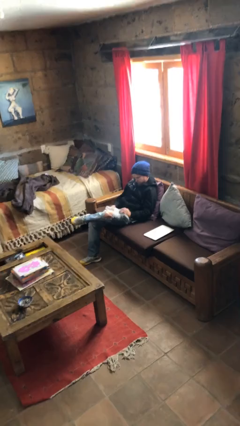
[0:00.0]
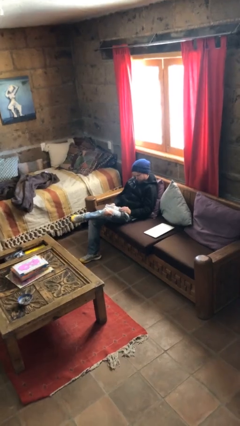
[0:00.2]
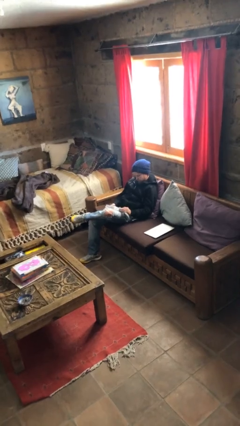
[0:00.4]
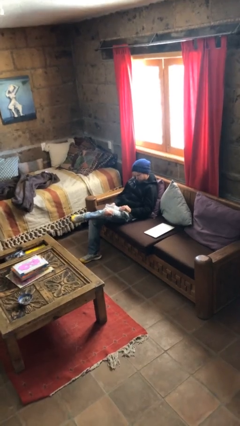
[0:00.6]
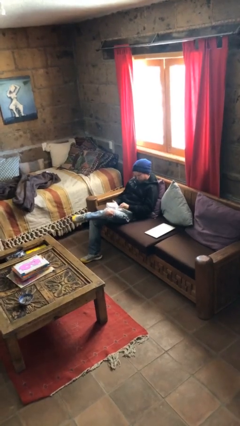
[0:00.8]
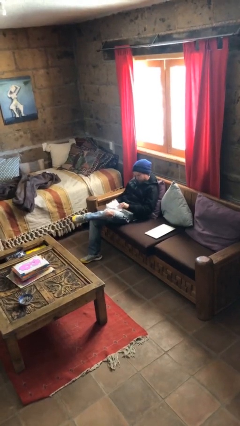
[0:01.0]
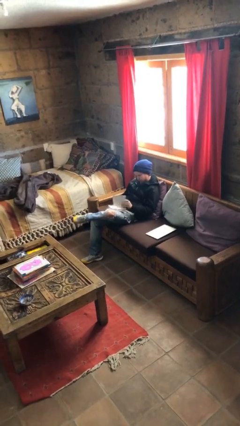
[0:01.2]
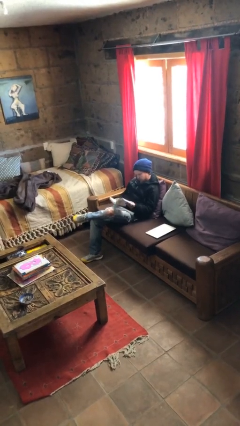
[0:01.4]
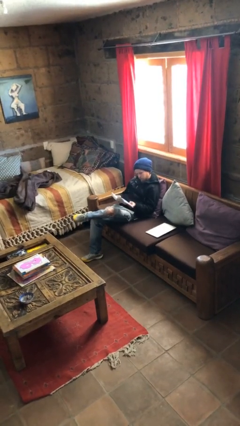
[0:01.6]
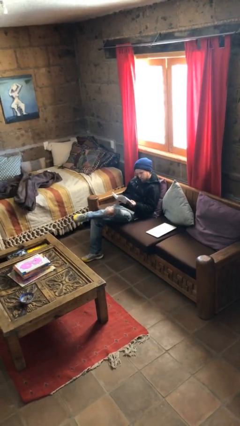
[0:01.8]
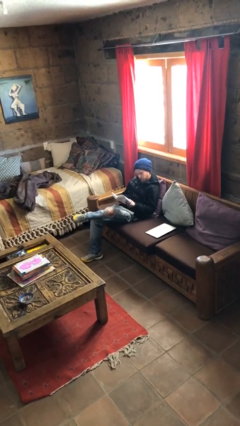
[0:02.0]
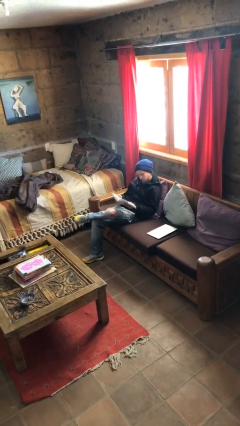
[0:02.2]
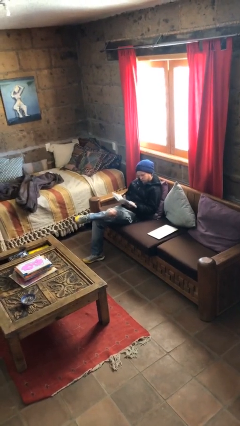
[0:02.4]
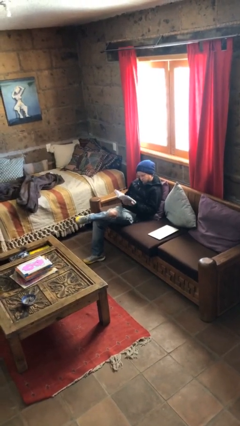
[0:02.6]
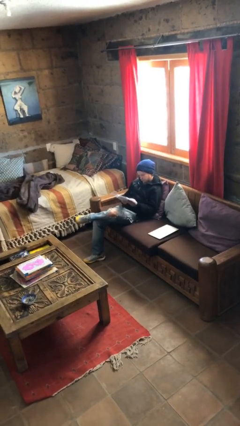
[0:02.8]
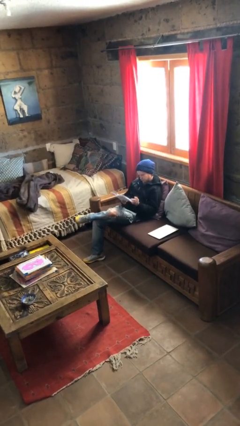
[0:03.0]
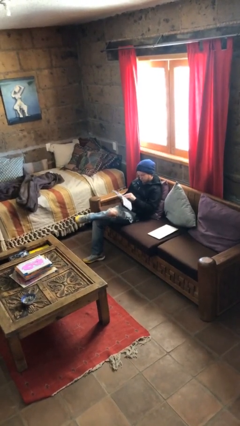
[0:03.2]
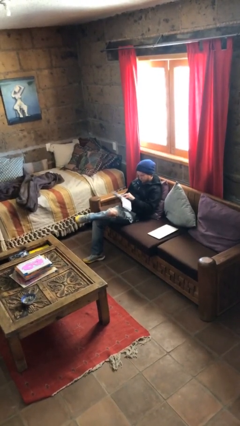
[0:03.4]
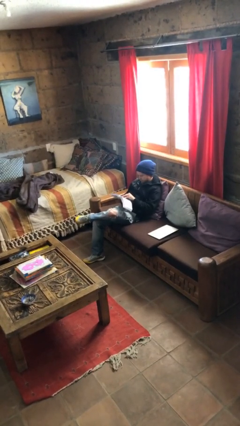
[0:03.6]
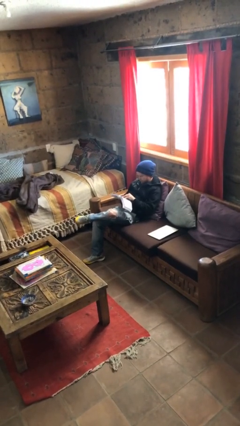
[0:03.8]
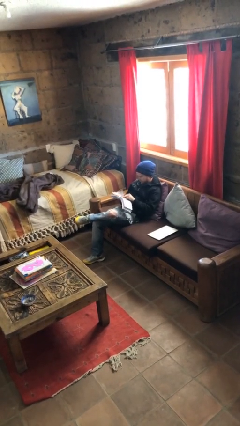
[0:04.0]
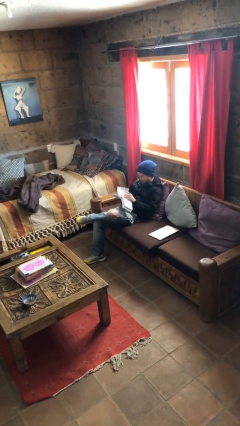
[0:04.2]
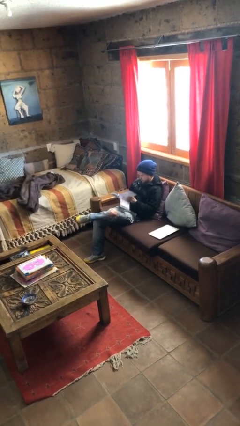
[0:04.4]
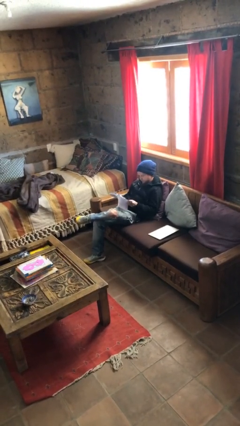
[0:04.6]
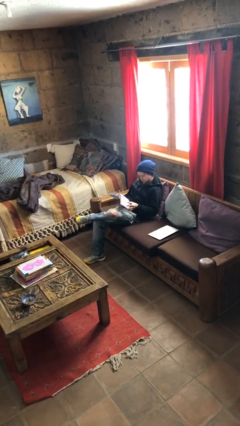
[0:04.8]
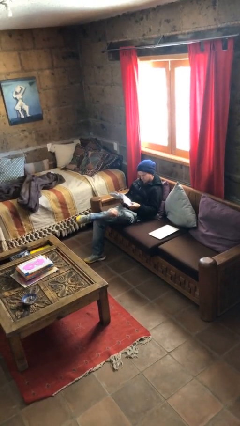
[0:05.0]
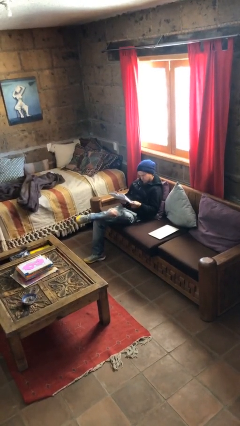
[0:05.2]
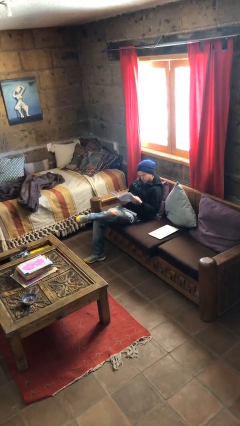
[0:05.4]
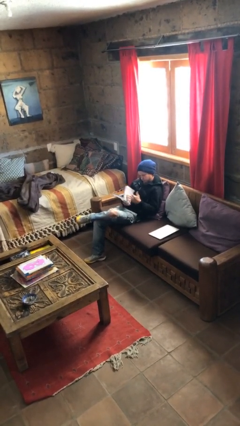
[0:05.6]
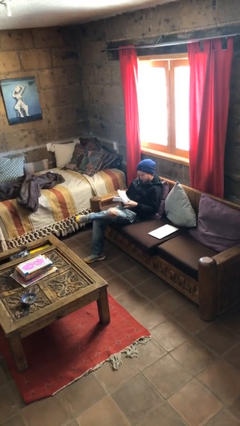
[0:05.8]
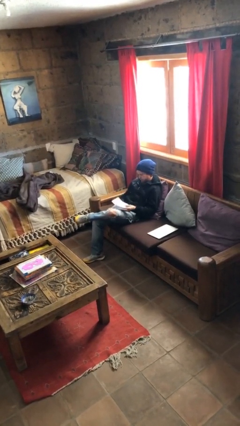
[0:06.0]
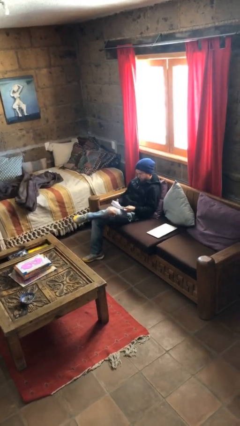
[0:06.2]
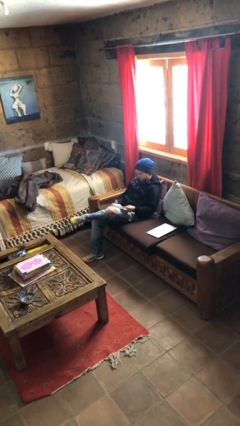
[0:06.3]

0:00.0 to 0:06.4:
person reads document

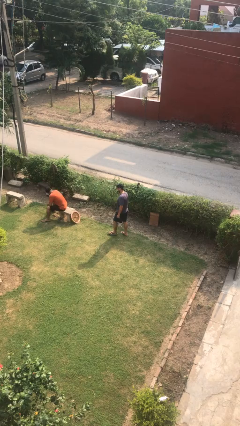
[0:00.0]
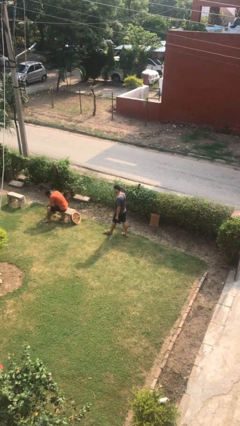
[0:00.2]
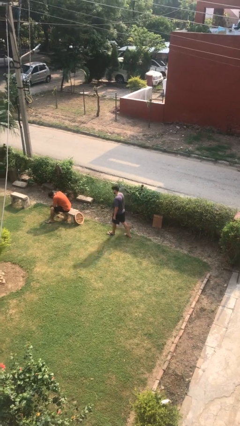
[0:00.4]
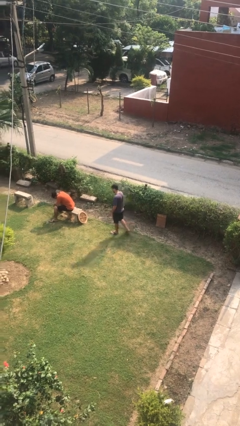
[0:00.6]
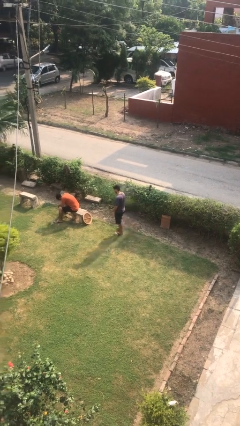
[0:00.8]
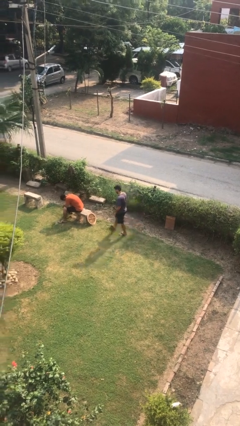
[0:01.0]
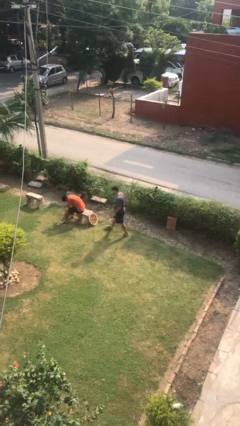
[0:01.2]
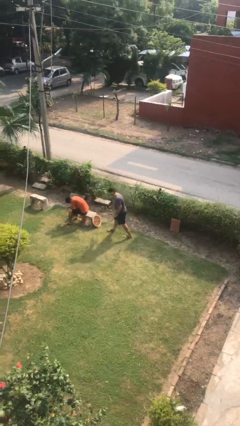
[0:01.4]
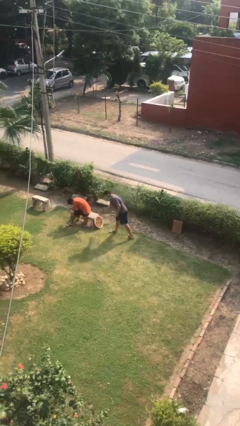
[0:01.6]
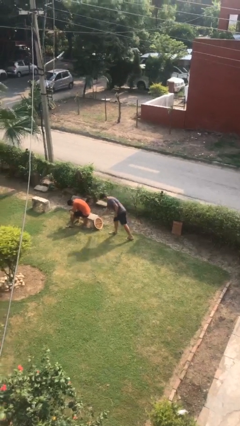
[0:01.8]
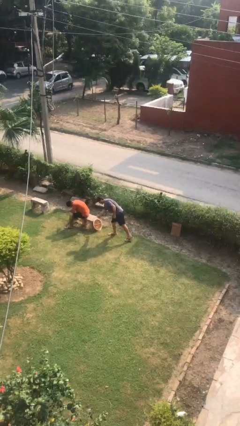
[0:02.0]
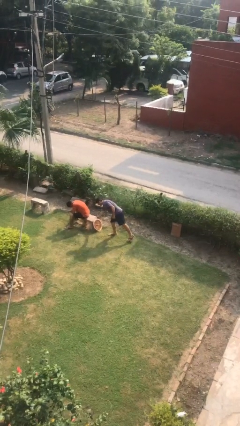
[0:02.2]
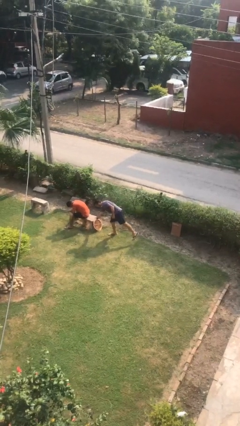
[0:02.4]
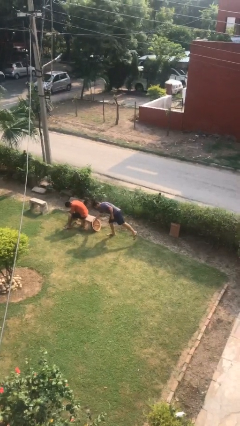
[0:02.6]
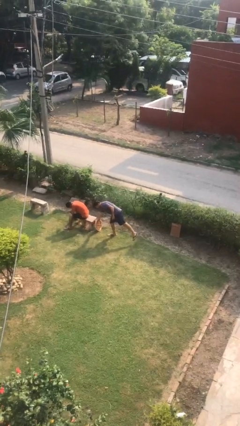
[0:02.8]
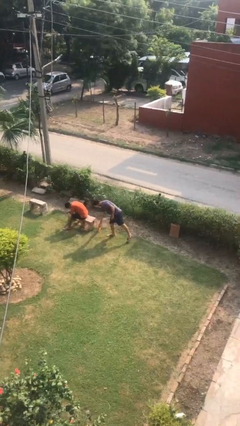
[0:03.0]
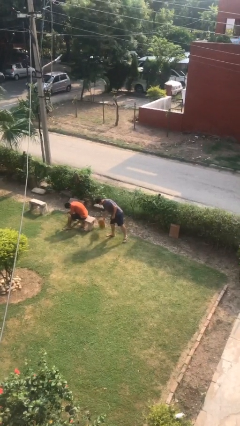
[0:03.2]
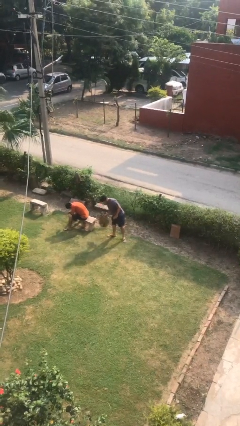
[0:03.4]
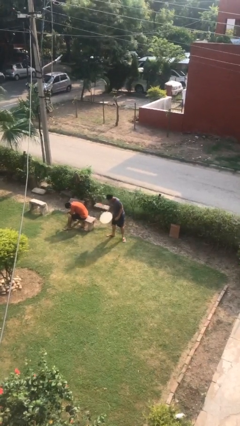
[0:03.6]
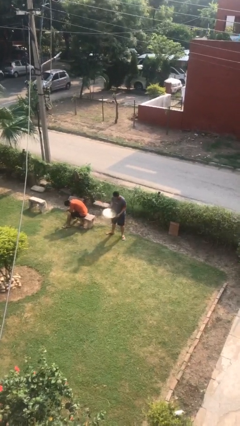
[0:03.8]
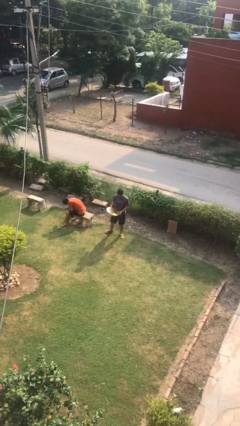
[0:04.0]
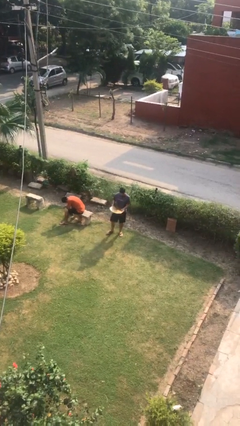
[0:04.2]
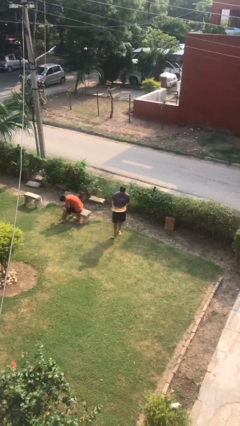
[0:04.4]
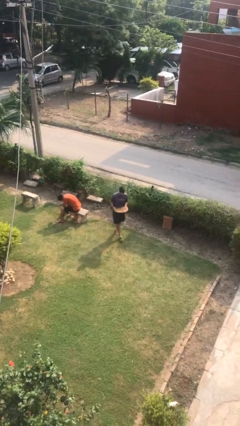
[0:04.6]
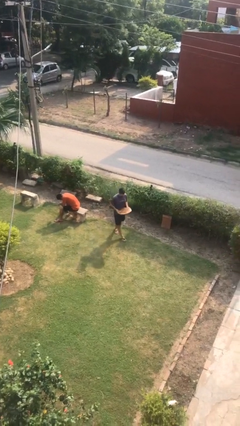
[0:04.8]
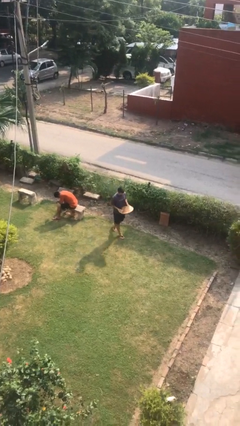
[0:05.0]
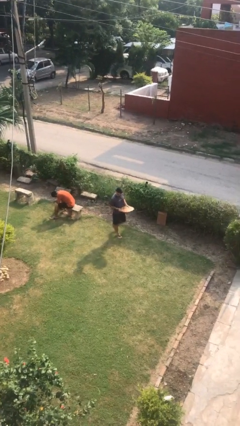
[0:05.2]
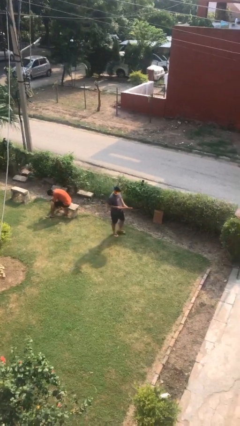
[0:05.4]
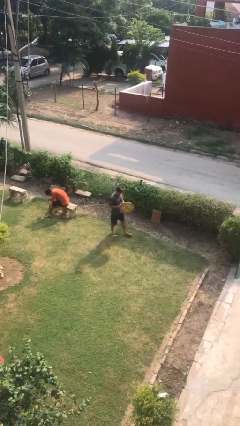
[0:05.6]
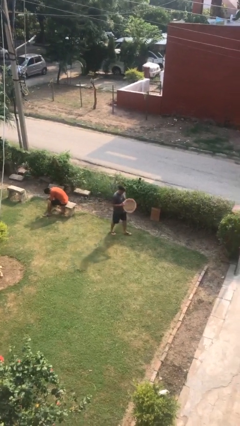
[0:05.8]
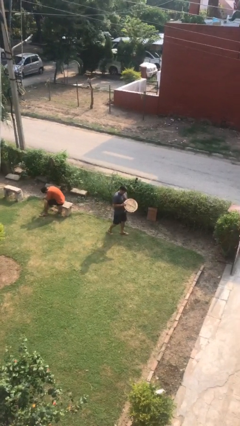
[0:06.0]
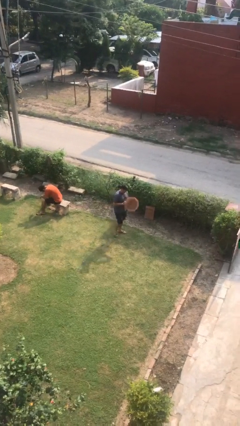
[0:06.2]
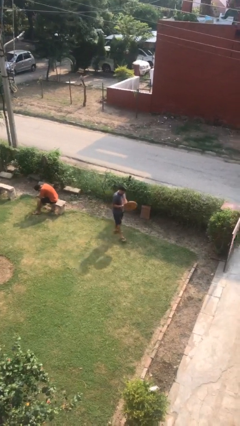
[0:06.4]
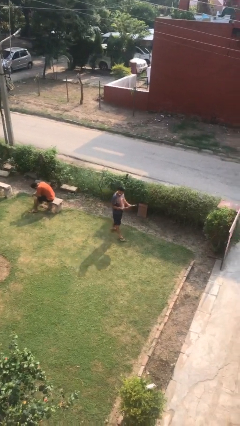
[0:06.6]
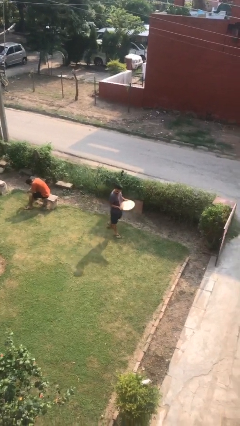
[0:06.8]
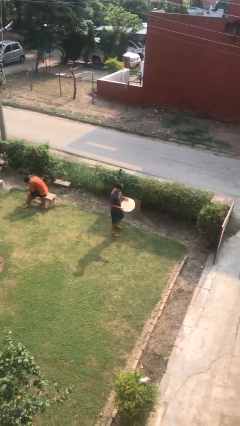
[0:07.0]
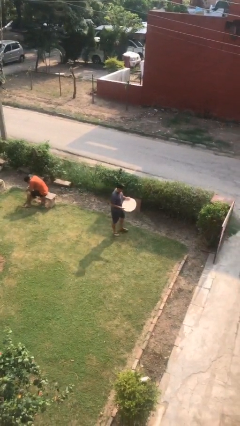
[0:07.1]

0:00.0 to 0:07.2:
person steals object from person

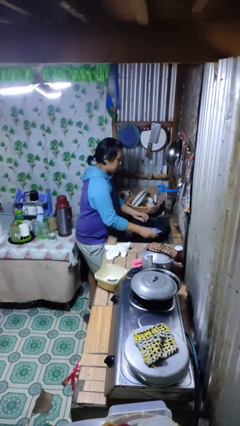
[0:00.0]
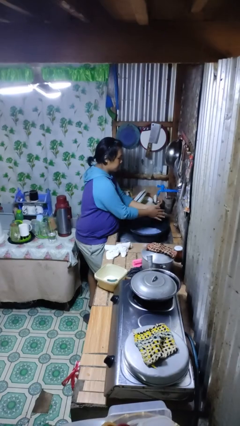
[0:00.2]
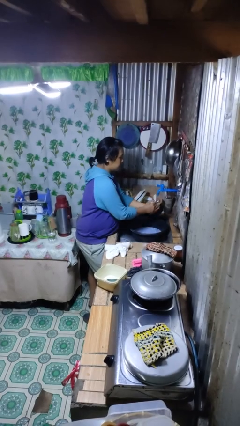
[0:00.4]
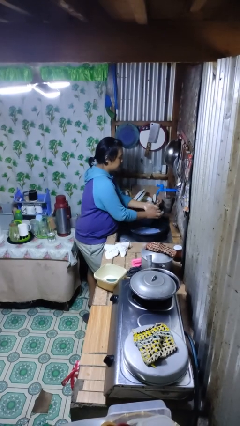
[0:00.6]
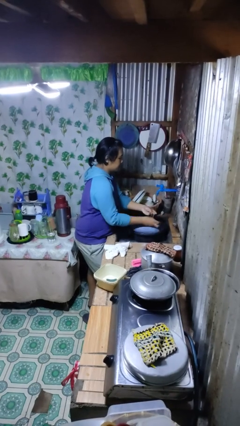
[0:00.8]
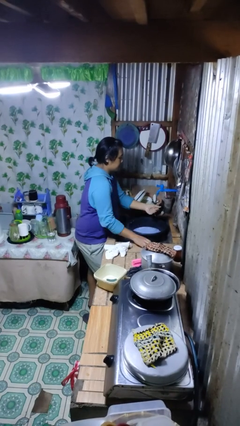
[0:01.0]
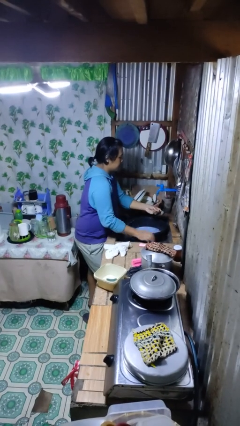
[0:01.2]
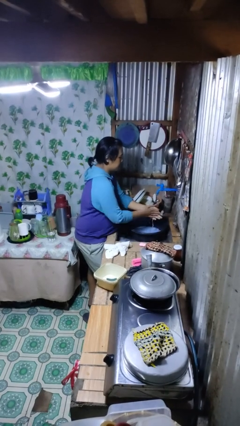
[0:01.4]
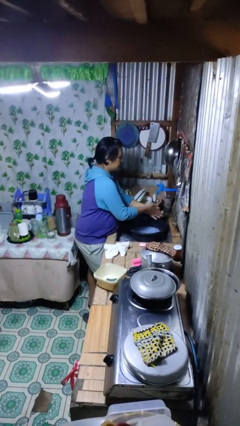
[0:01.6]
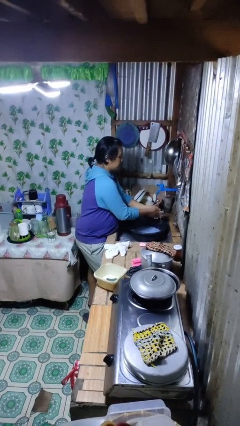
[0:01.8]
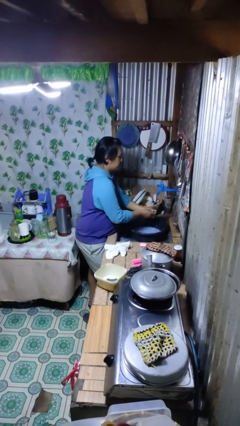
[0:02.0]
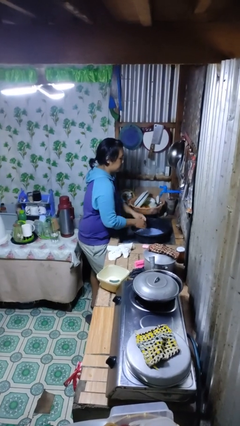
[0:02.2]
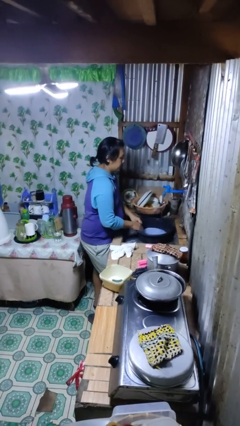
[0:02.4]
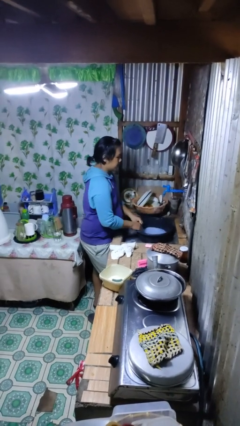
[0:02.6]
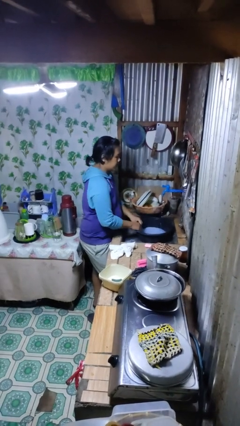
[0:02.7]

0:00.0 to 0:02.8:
person washes hands

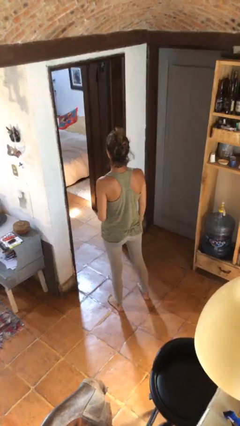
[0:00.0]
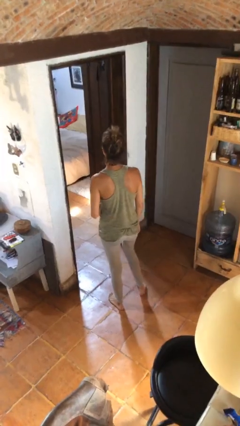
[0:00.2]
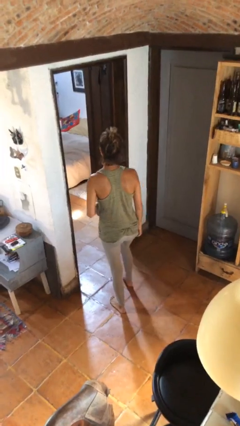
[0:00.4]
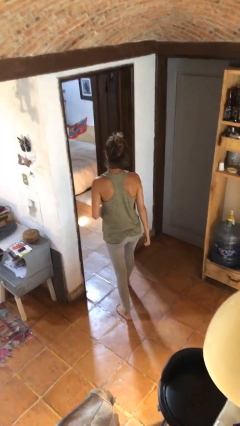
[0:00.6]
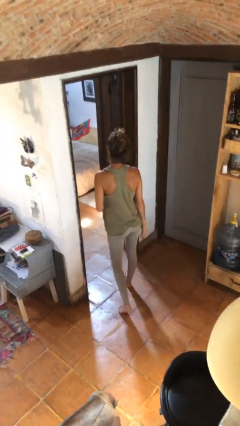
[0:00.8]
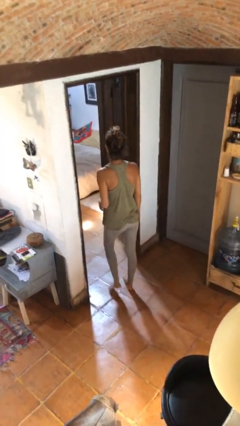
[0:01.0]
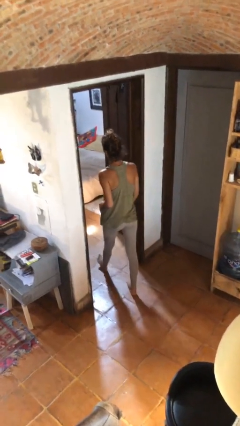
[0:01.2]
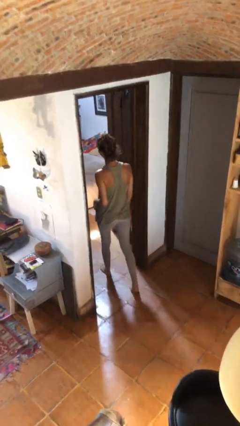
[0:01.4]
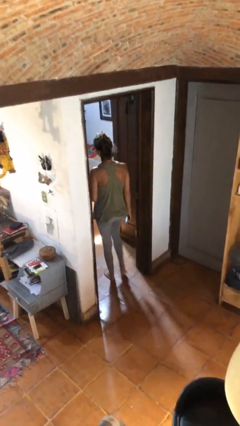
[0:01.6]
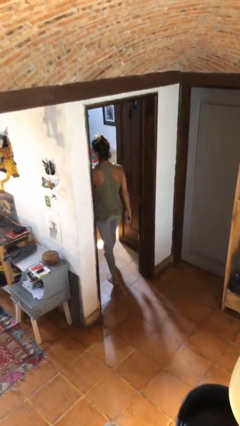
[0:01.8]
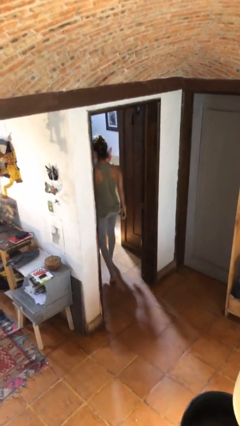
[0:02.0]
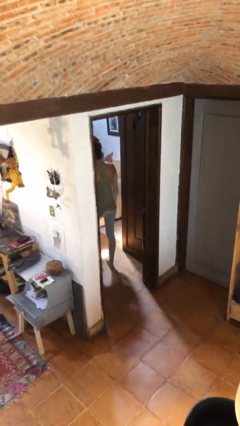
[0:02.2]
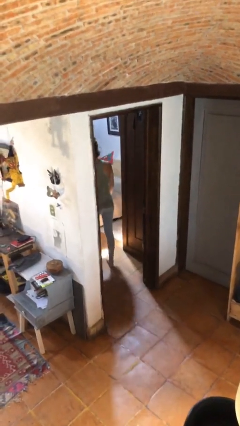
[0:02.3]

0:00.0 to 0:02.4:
person exits scene through structure
